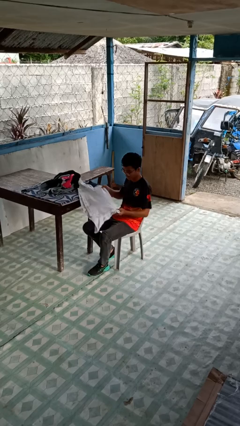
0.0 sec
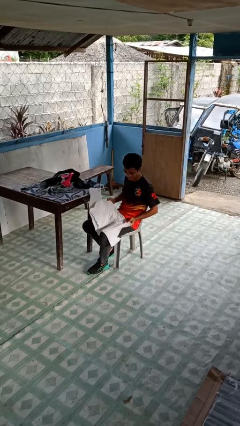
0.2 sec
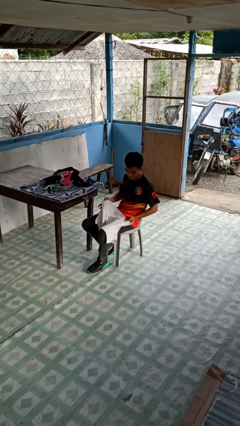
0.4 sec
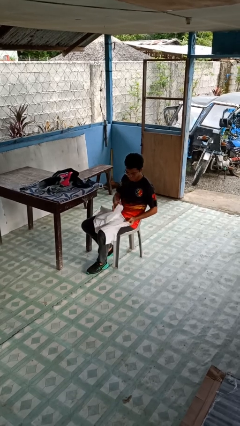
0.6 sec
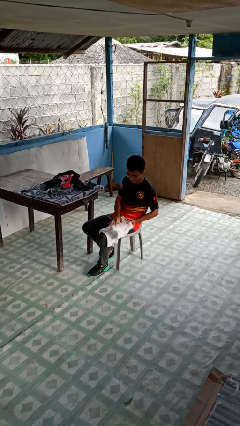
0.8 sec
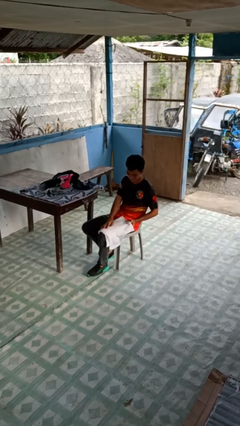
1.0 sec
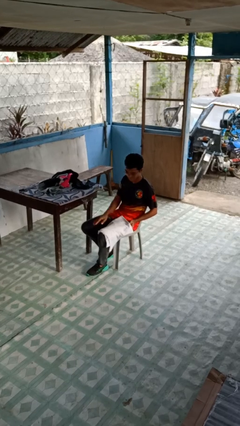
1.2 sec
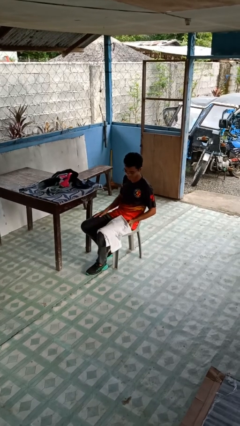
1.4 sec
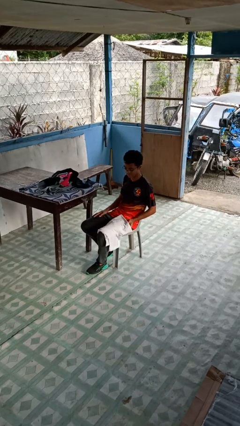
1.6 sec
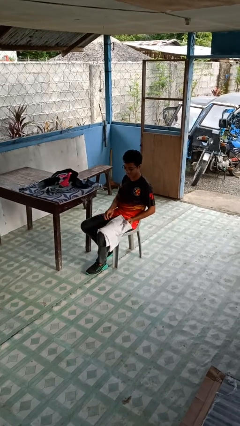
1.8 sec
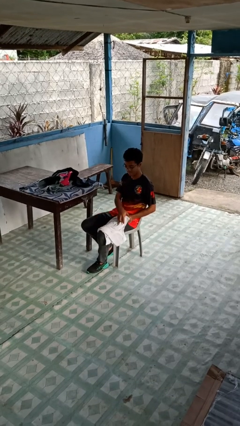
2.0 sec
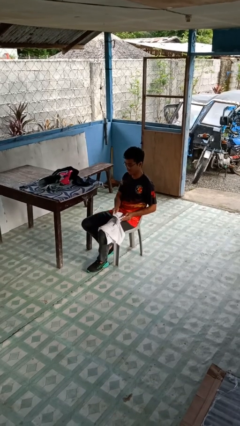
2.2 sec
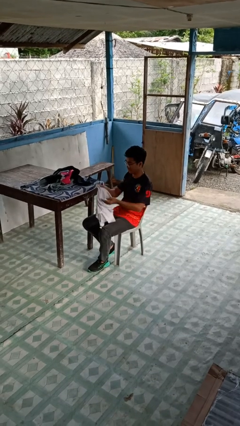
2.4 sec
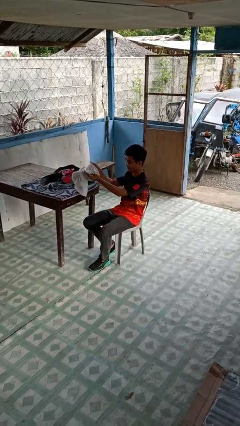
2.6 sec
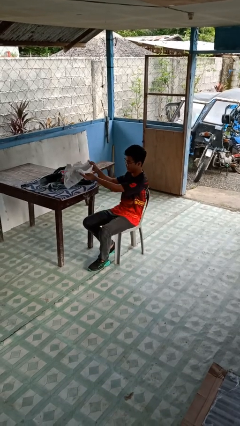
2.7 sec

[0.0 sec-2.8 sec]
person folds shirt

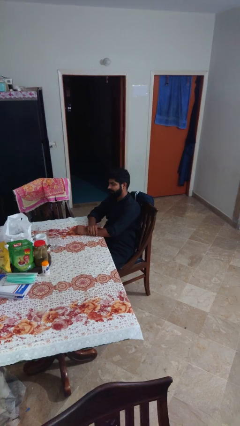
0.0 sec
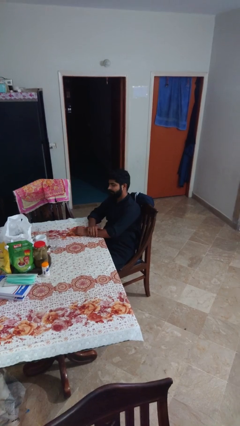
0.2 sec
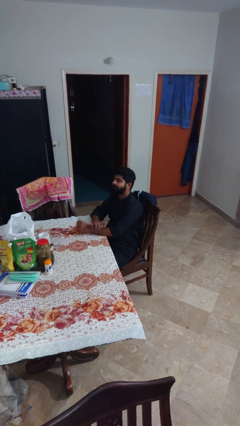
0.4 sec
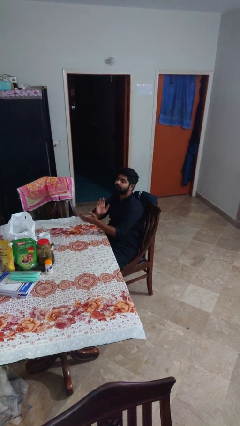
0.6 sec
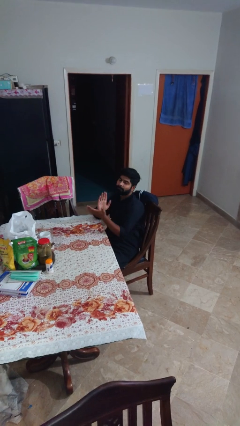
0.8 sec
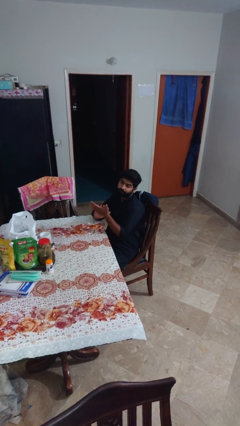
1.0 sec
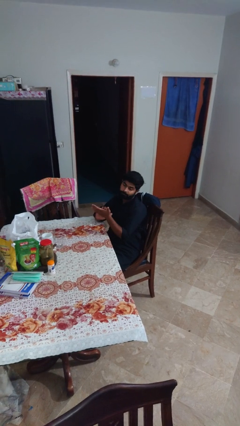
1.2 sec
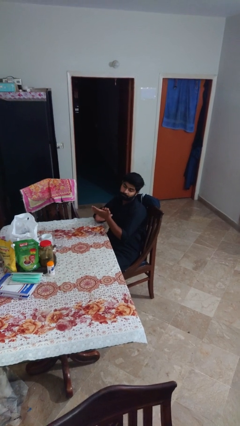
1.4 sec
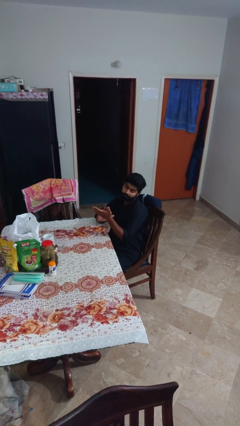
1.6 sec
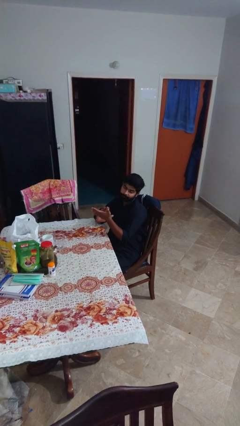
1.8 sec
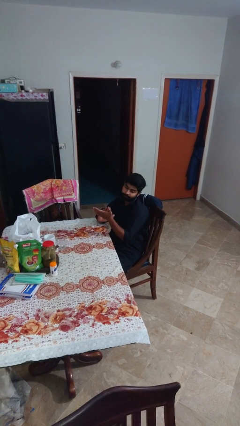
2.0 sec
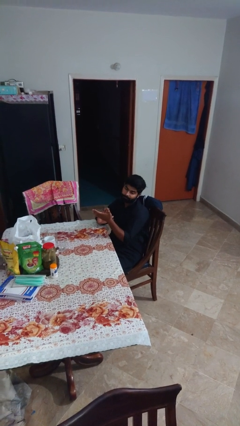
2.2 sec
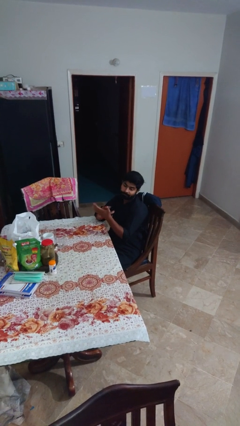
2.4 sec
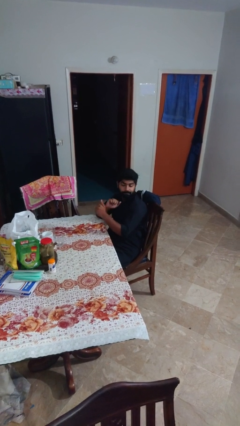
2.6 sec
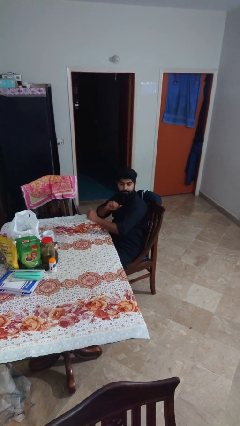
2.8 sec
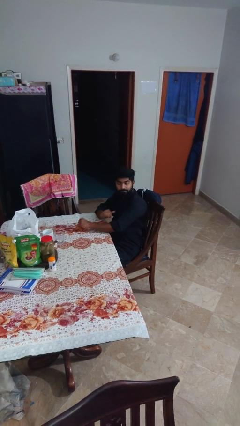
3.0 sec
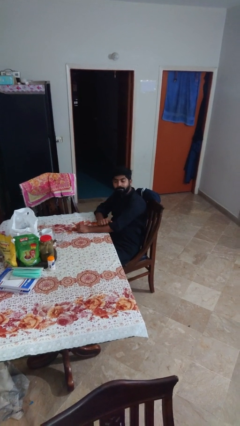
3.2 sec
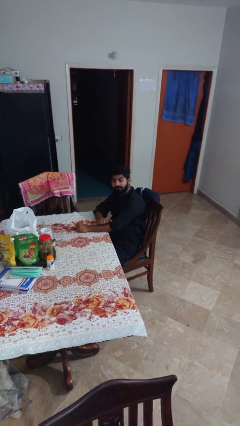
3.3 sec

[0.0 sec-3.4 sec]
person claps hands

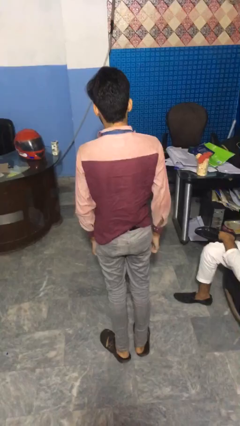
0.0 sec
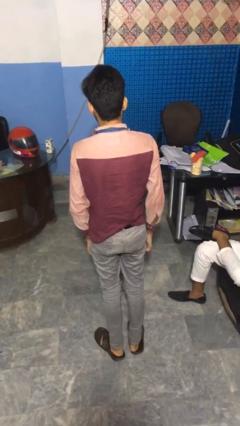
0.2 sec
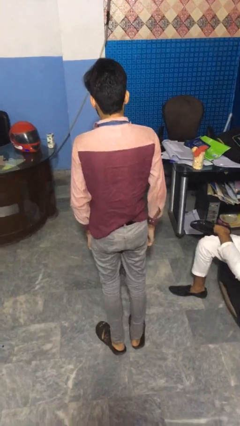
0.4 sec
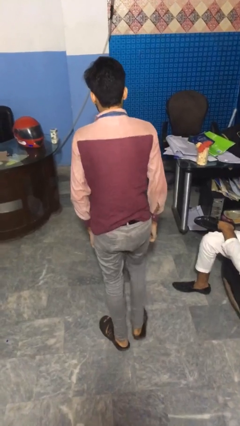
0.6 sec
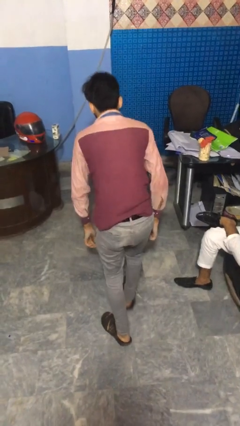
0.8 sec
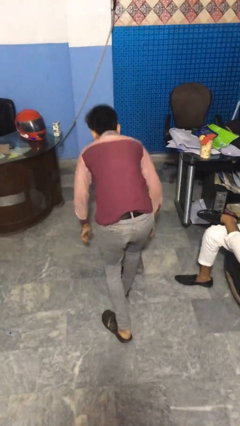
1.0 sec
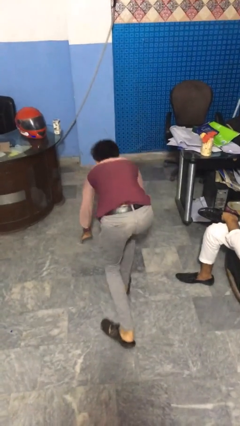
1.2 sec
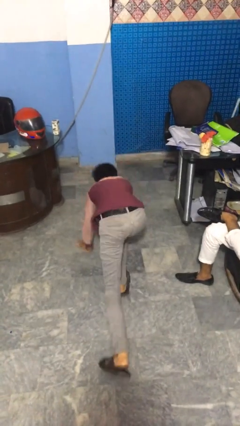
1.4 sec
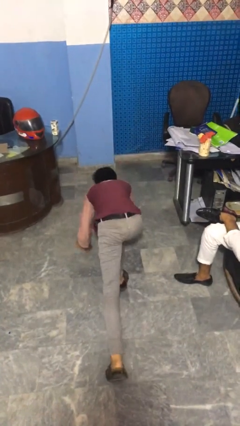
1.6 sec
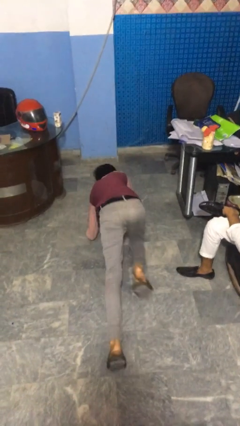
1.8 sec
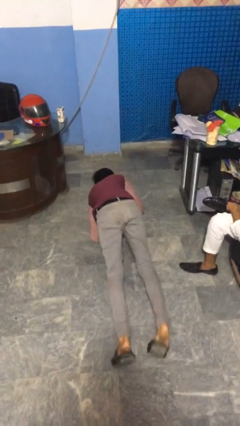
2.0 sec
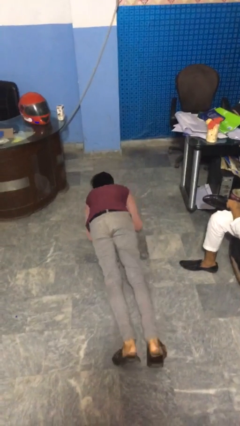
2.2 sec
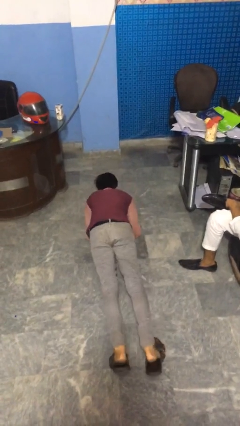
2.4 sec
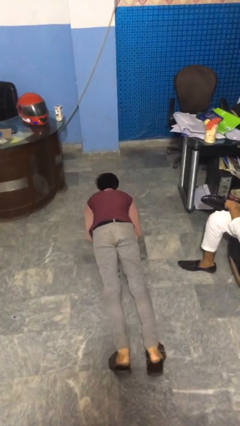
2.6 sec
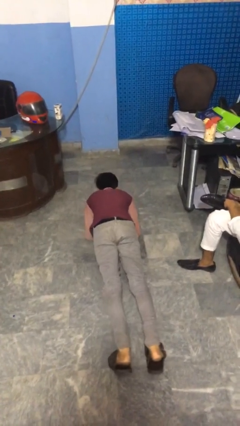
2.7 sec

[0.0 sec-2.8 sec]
person exercises with plank

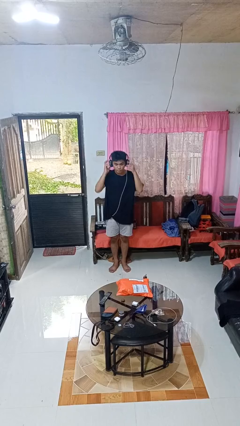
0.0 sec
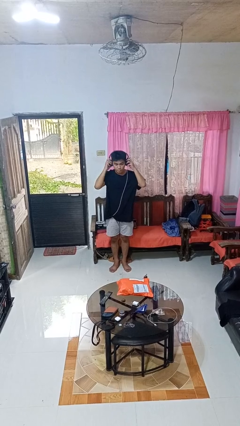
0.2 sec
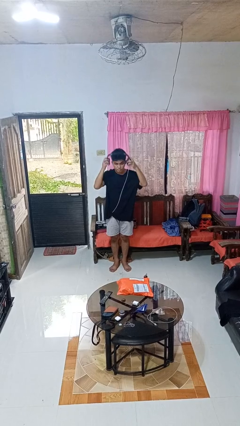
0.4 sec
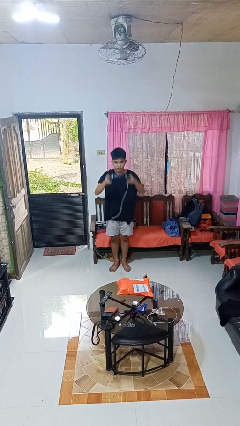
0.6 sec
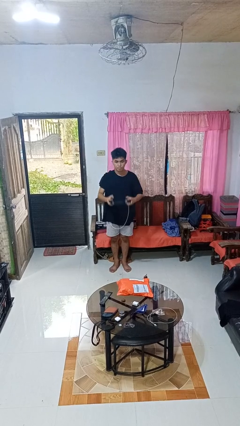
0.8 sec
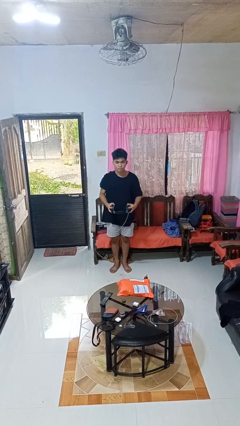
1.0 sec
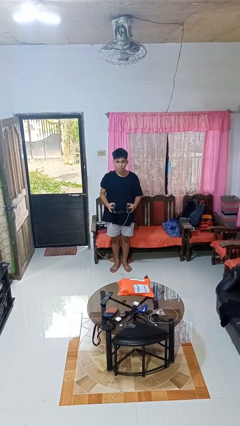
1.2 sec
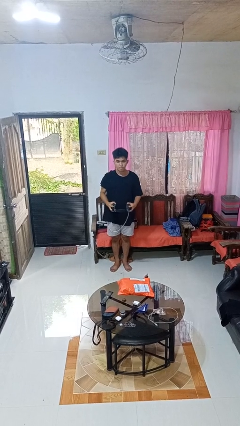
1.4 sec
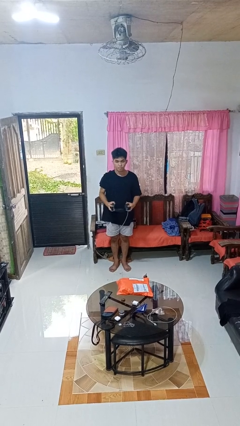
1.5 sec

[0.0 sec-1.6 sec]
person takes off headphones

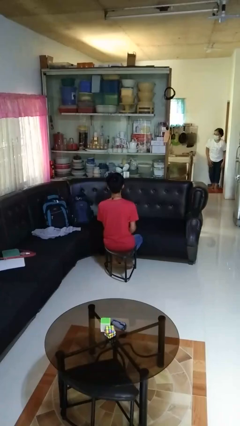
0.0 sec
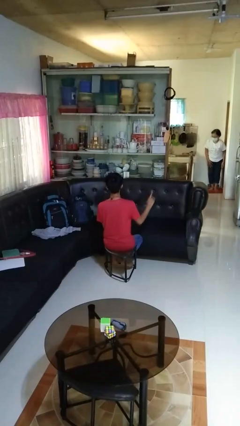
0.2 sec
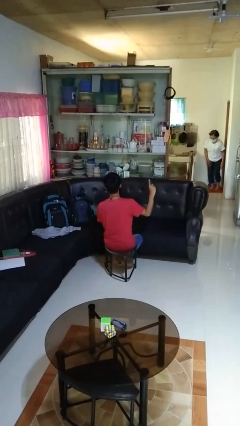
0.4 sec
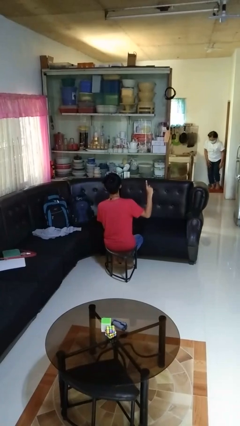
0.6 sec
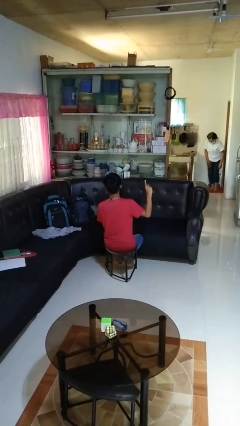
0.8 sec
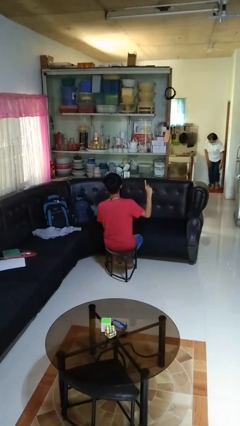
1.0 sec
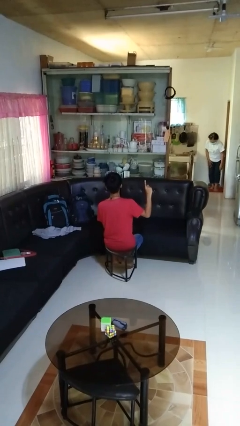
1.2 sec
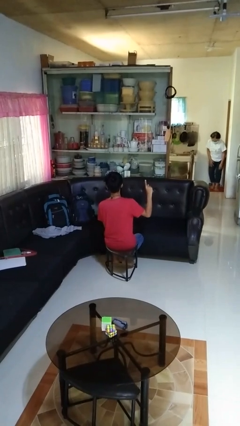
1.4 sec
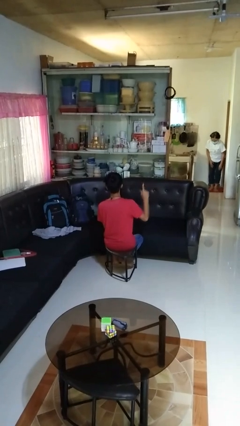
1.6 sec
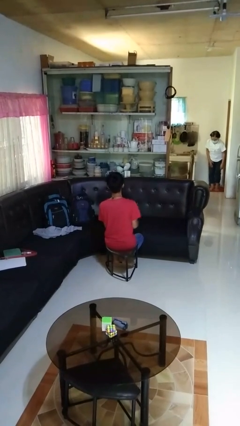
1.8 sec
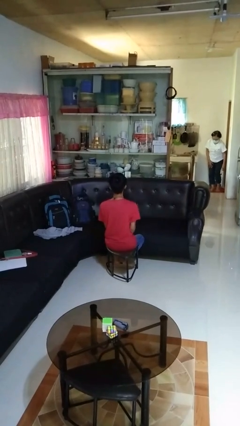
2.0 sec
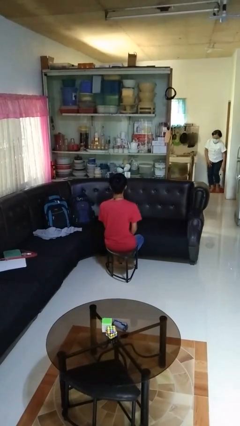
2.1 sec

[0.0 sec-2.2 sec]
person gestures number one

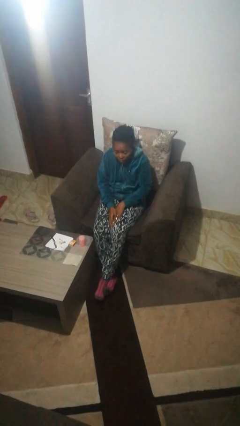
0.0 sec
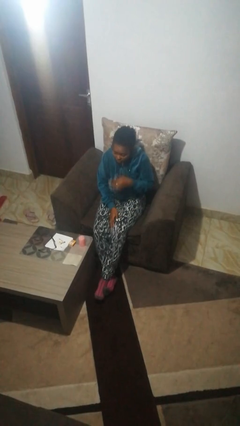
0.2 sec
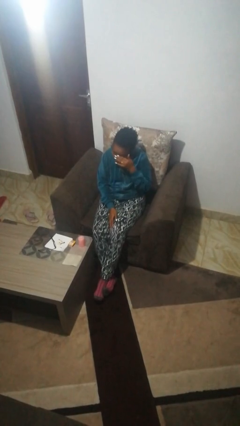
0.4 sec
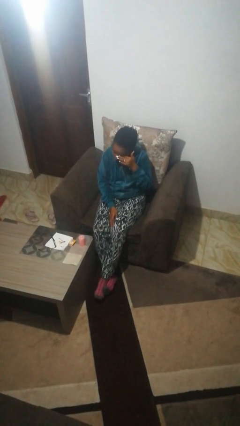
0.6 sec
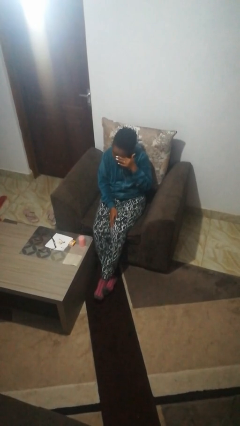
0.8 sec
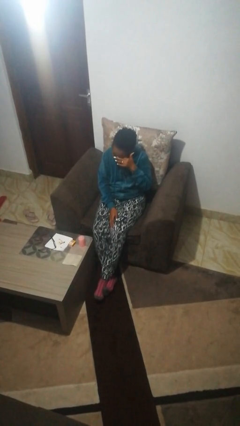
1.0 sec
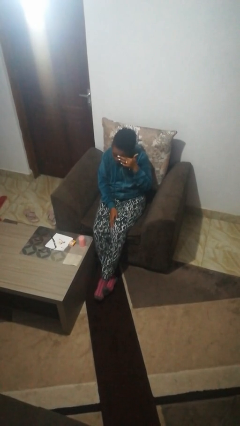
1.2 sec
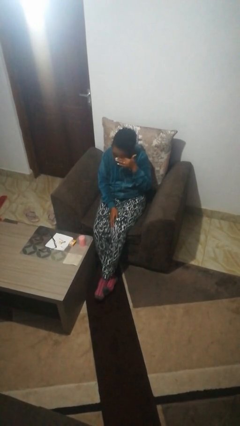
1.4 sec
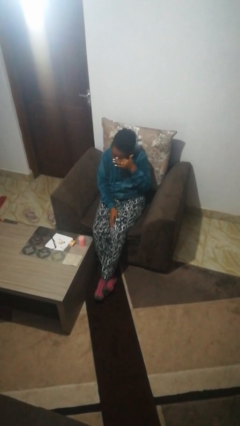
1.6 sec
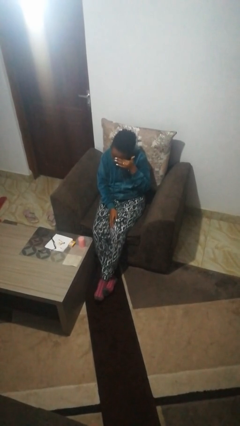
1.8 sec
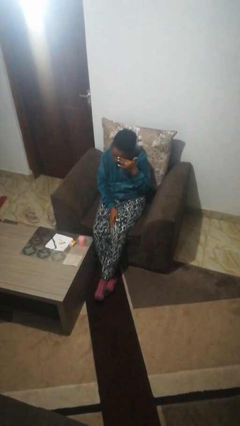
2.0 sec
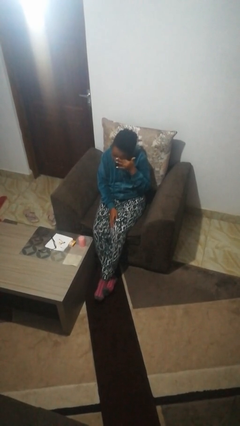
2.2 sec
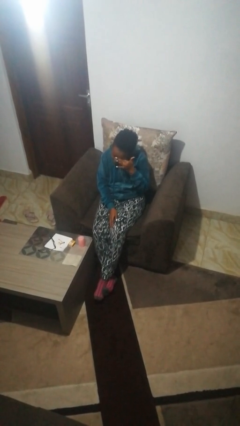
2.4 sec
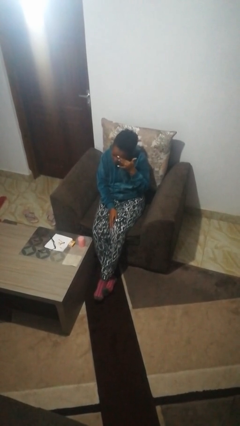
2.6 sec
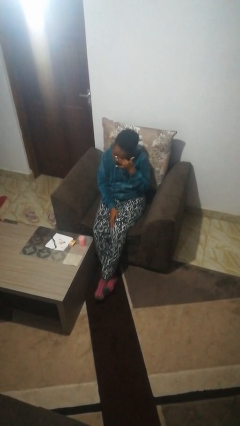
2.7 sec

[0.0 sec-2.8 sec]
person rubs eyes

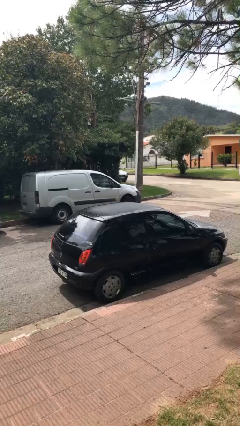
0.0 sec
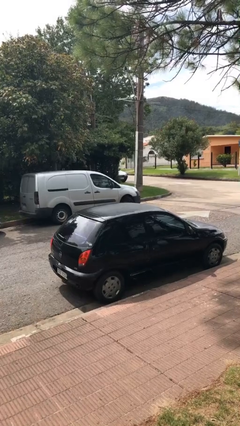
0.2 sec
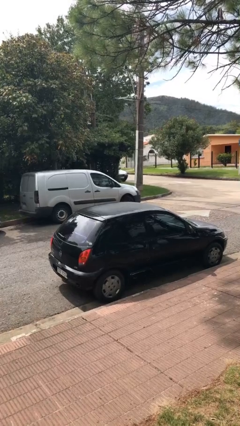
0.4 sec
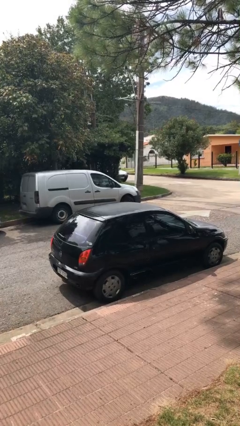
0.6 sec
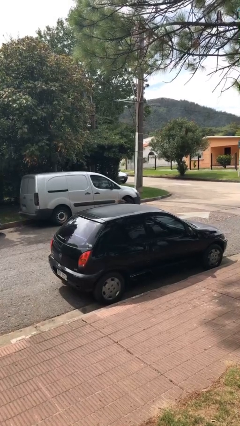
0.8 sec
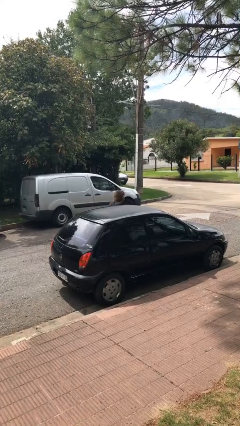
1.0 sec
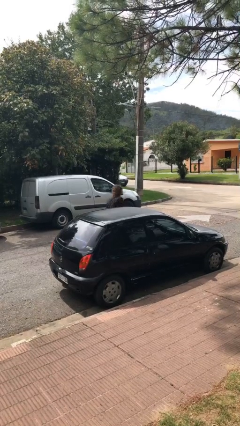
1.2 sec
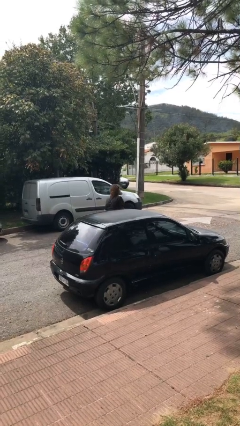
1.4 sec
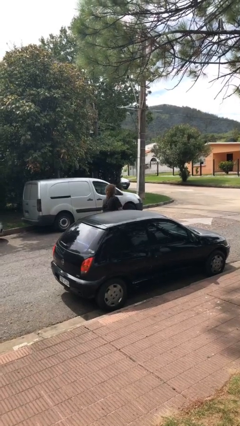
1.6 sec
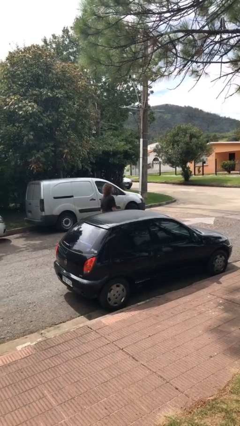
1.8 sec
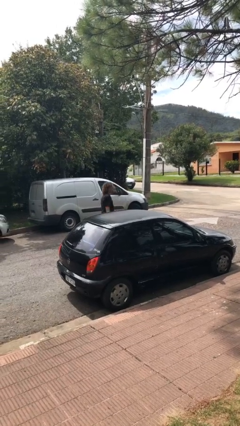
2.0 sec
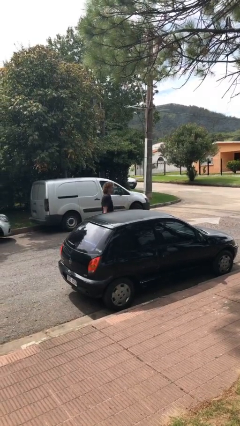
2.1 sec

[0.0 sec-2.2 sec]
person exits car
